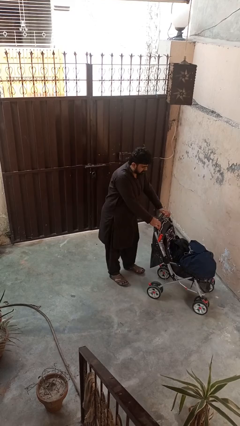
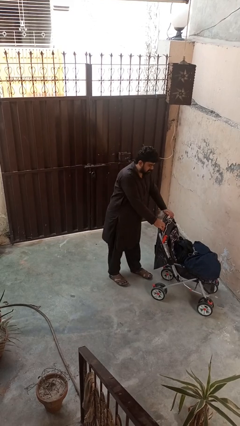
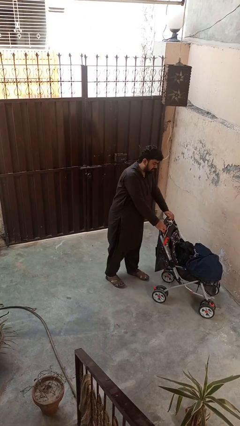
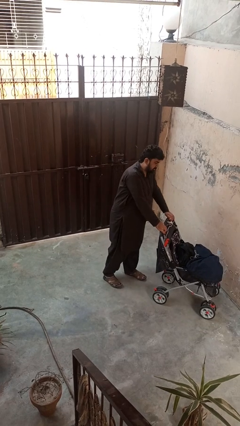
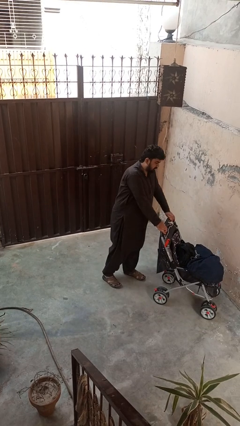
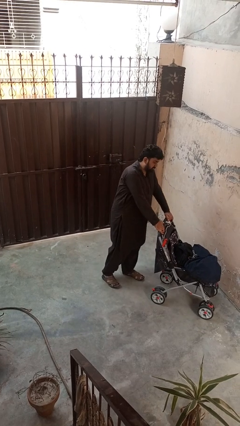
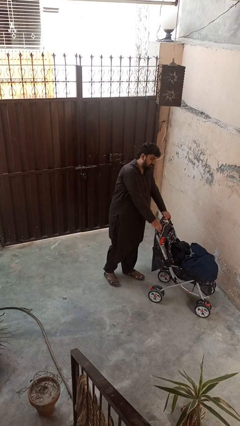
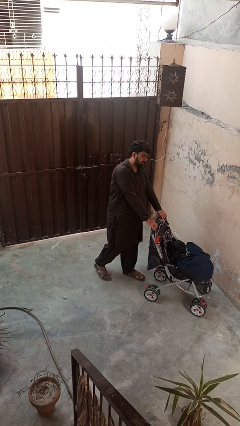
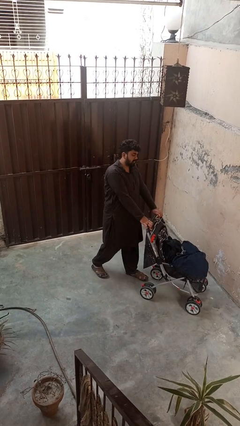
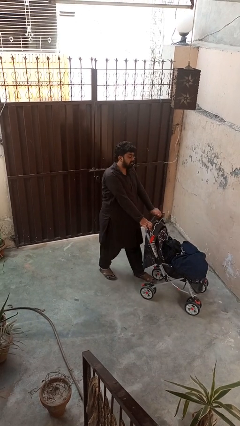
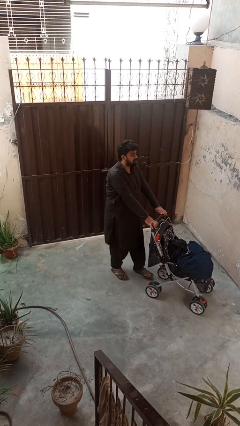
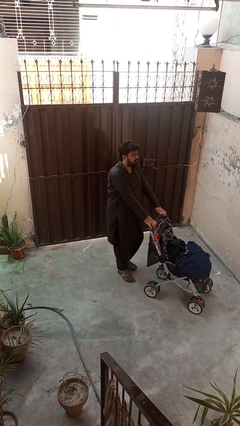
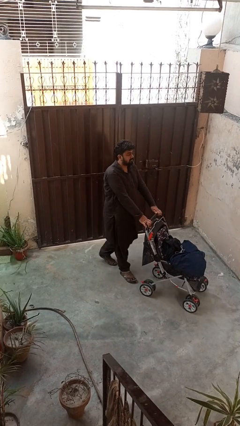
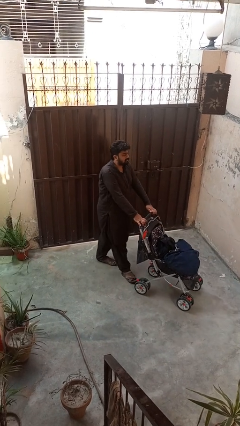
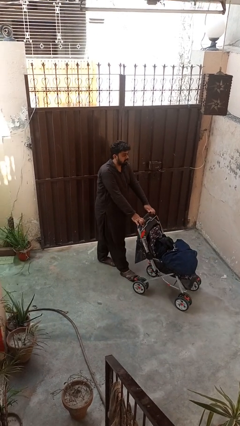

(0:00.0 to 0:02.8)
person pulls wheeled cart

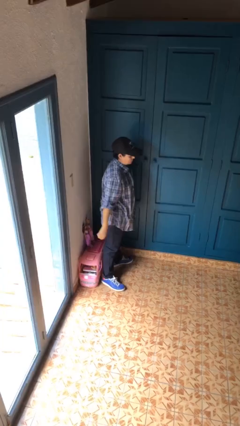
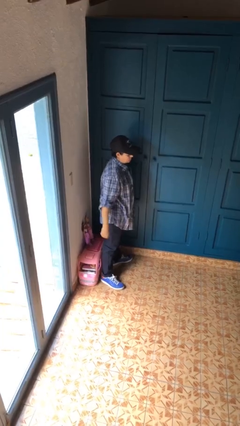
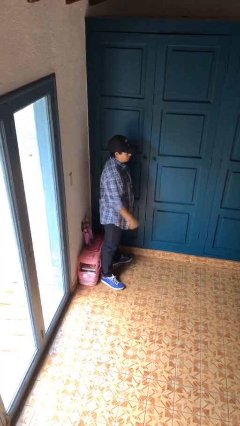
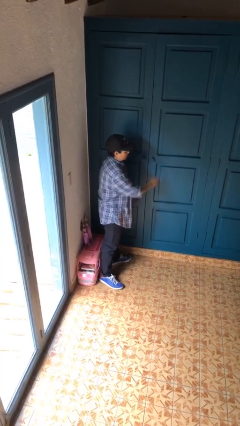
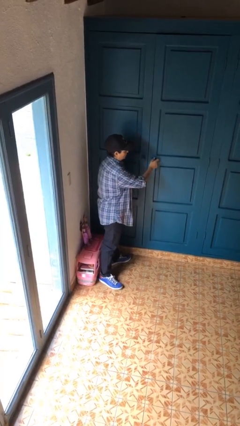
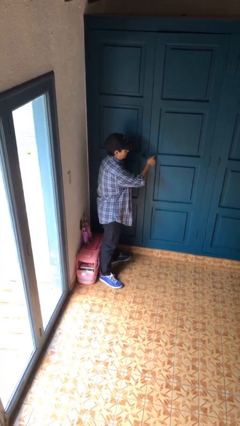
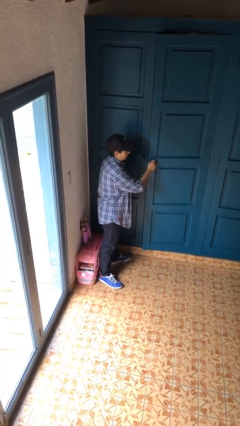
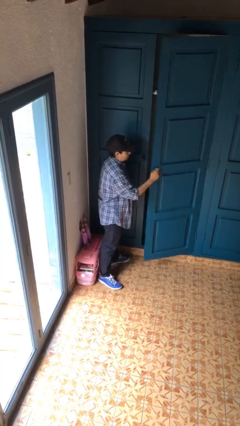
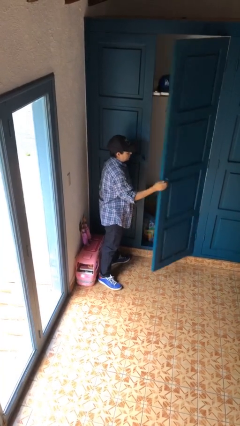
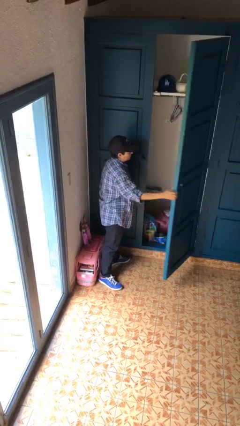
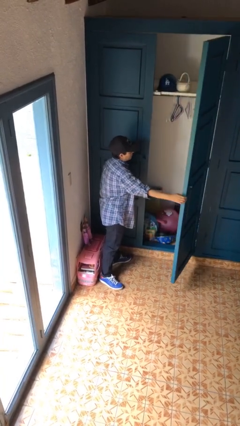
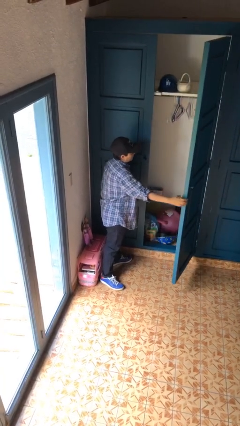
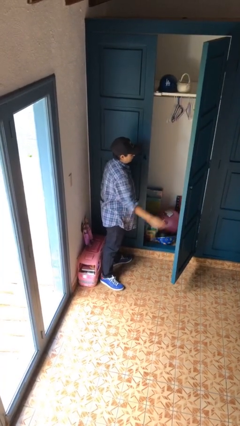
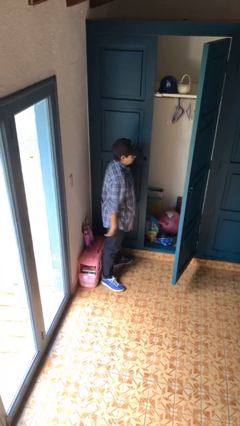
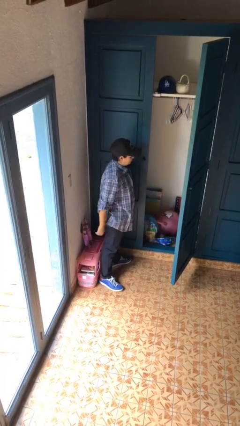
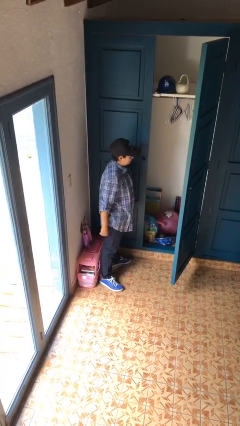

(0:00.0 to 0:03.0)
person opens closet door

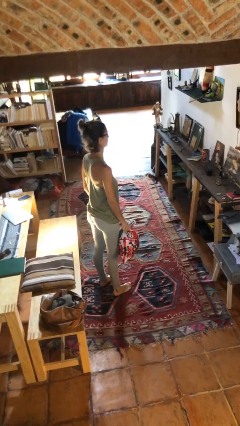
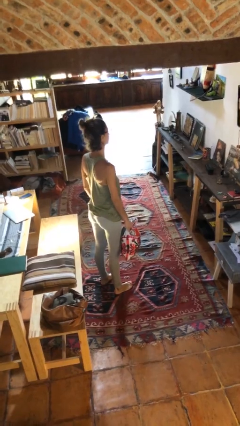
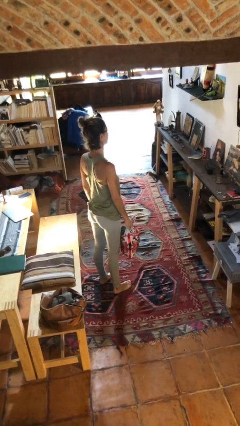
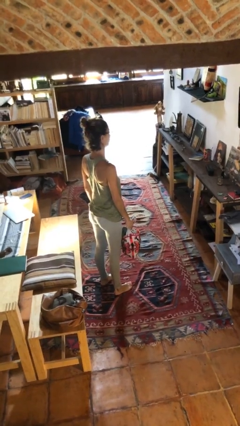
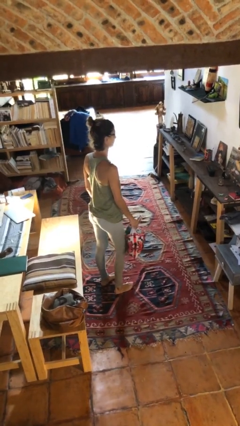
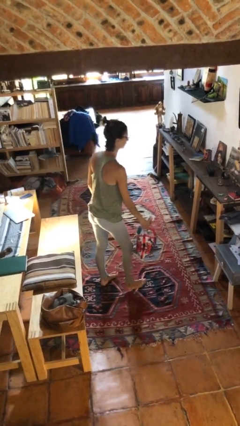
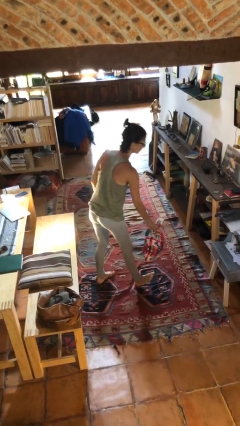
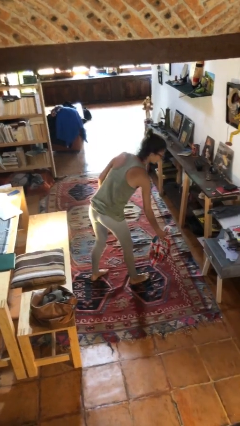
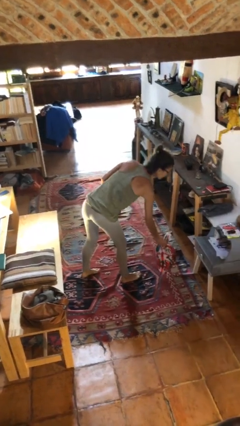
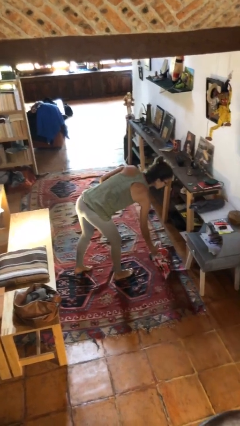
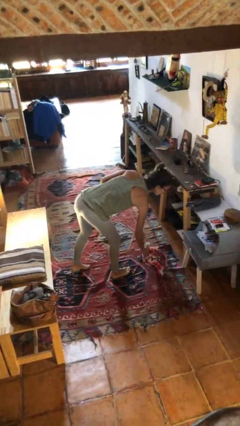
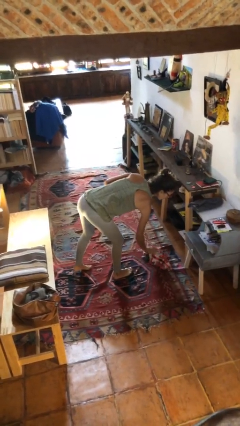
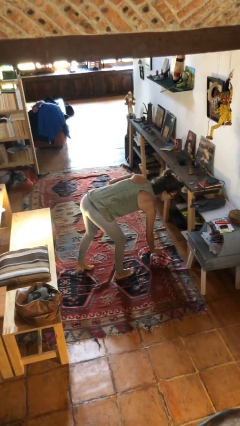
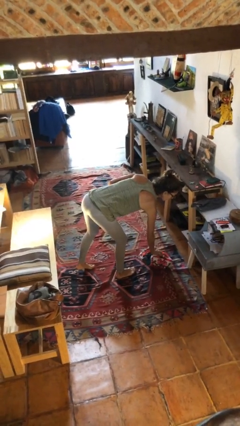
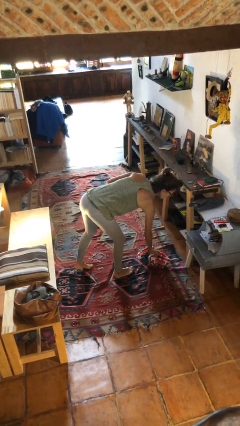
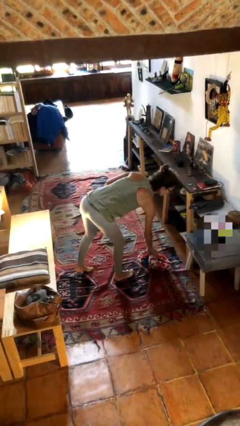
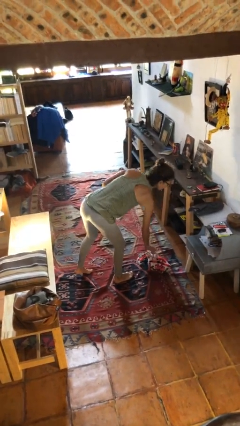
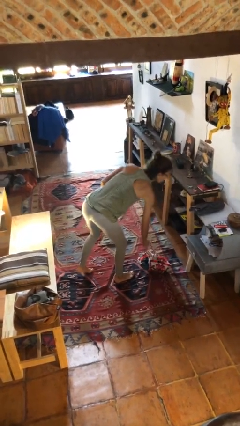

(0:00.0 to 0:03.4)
person puts down object on floor

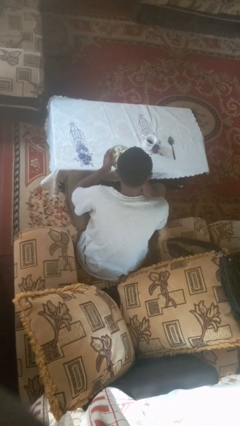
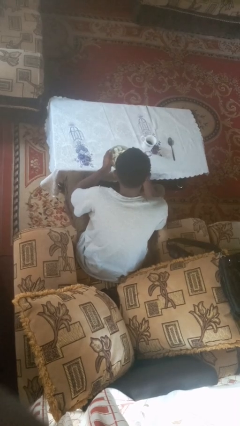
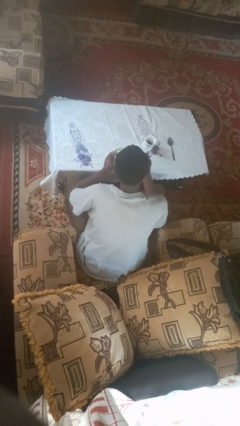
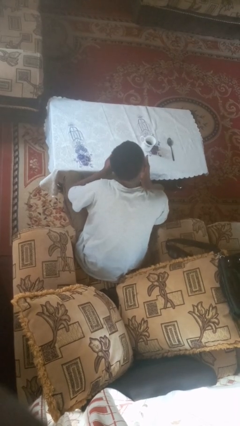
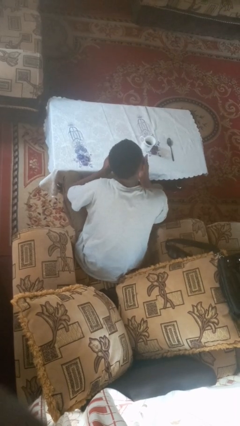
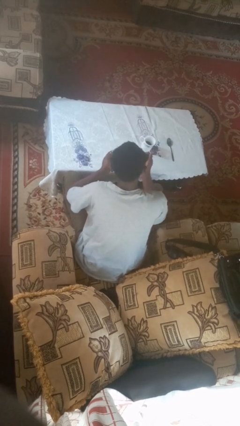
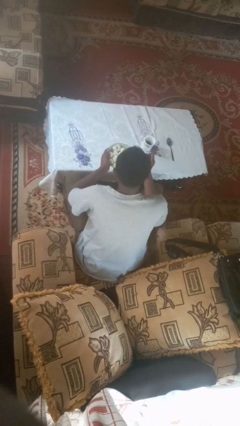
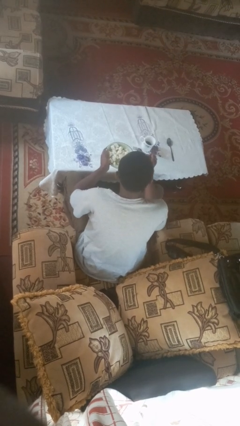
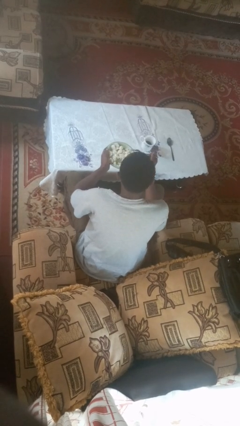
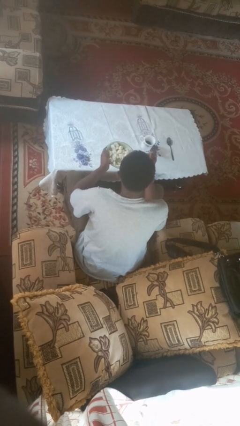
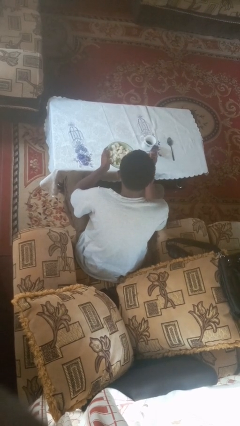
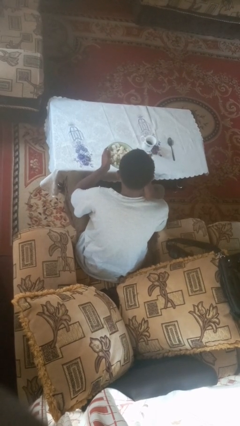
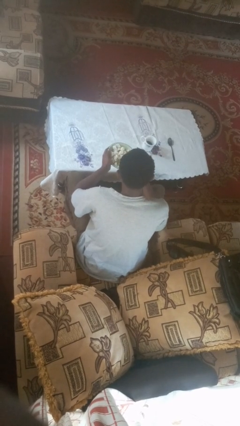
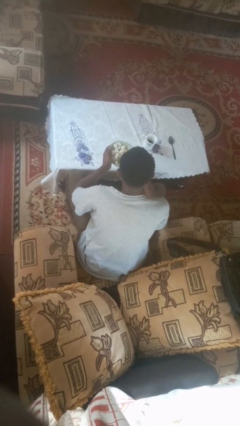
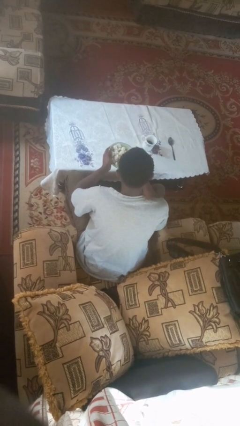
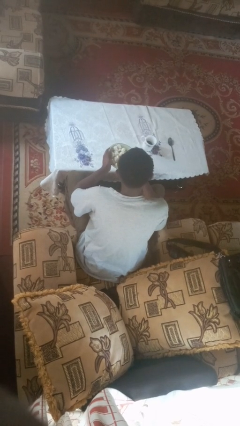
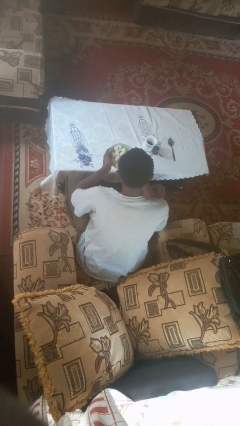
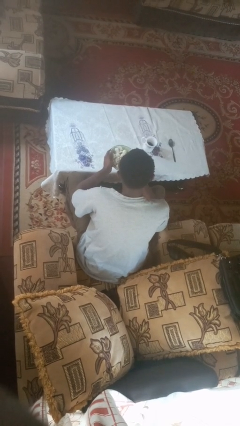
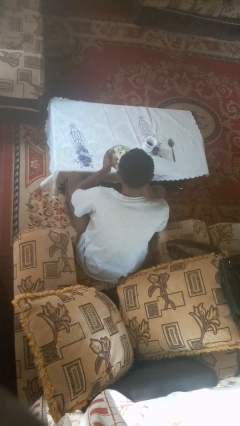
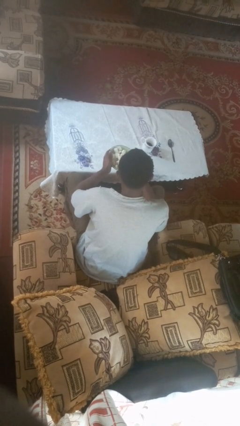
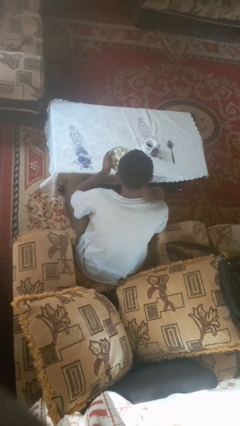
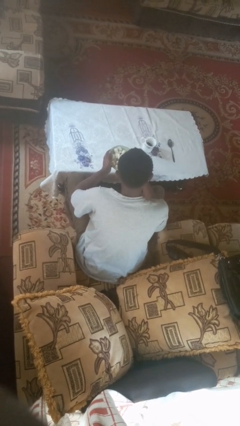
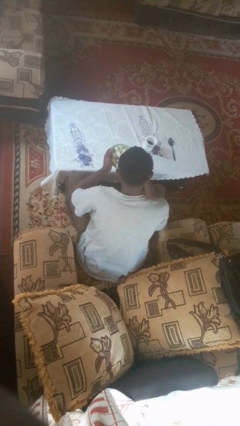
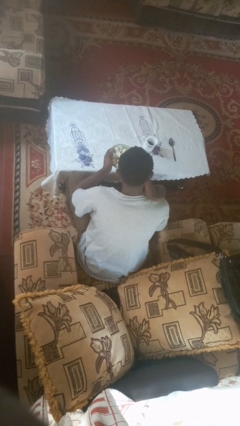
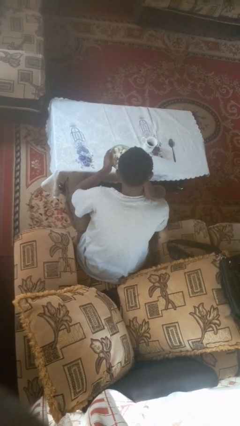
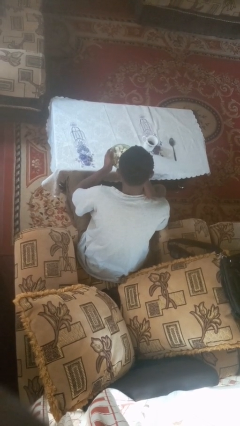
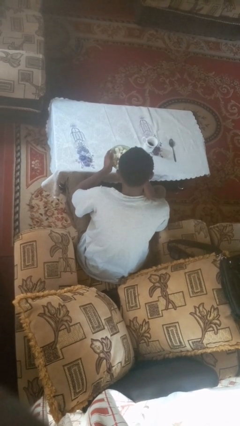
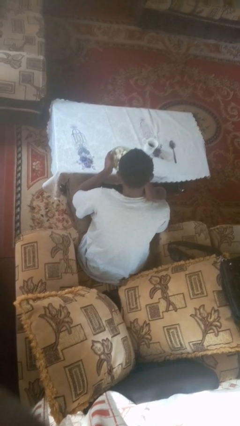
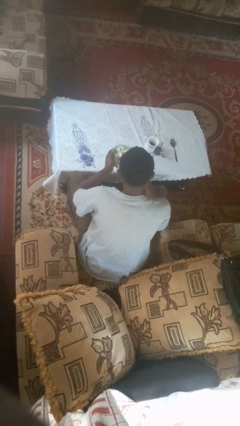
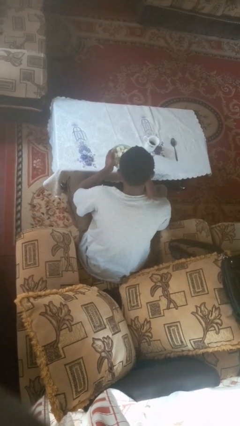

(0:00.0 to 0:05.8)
person eats with utensil

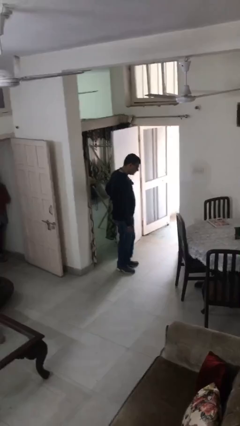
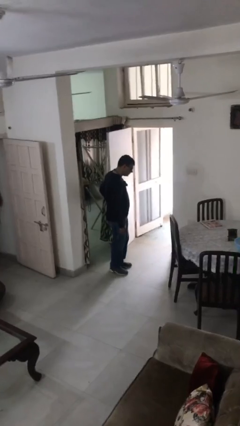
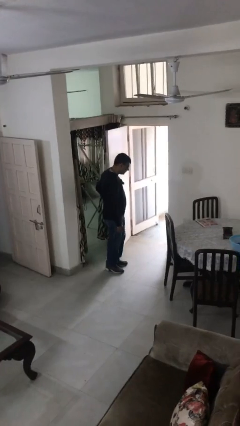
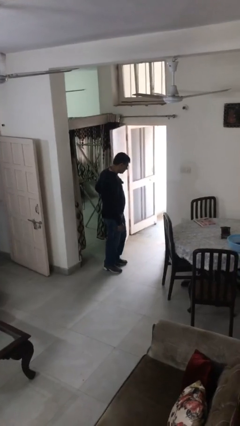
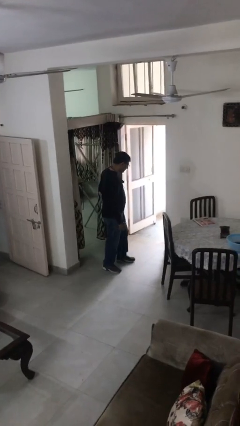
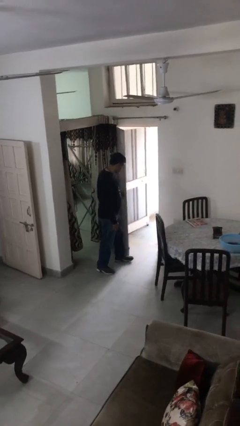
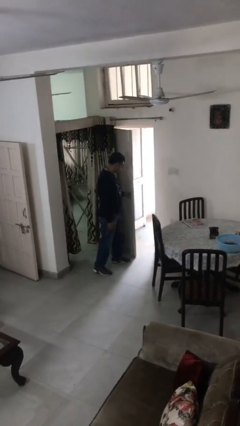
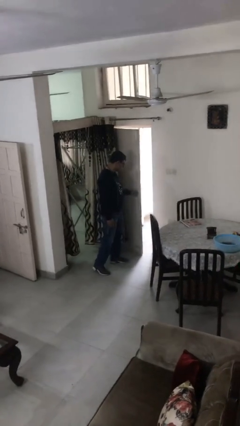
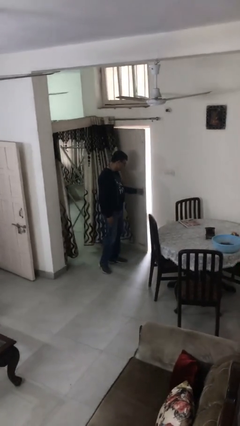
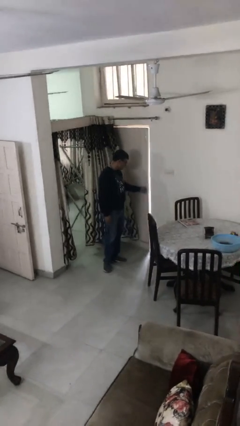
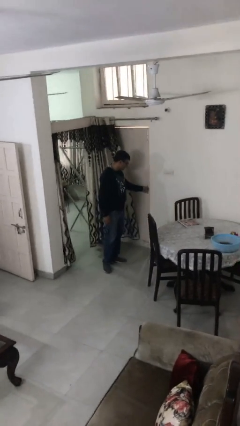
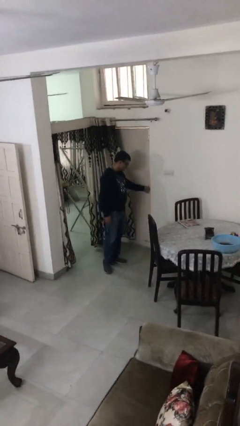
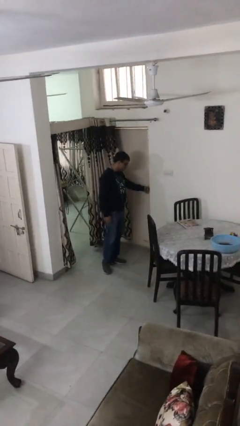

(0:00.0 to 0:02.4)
person closes facility door
